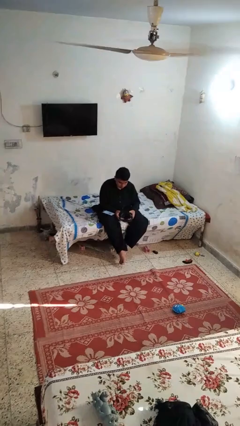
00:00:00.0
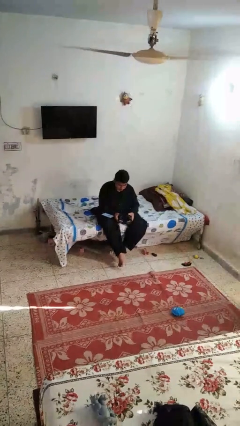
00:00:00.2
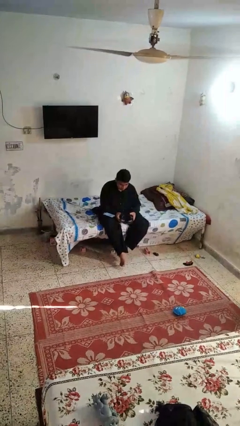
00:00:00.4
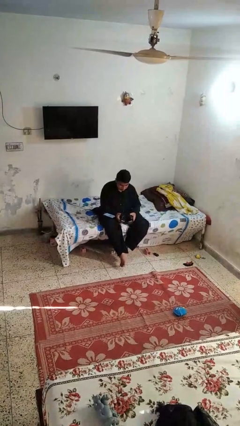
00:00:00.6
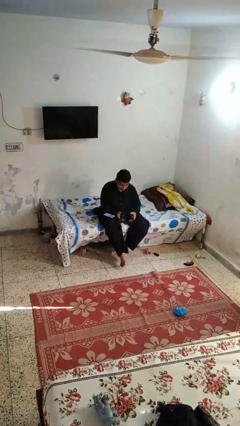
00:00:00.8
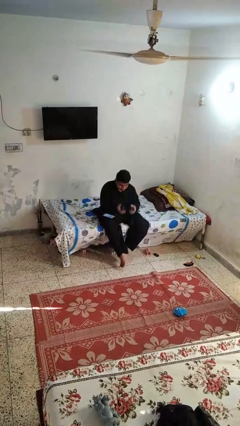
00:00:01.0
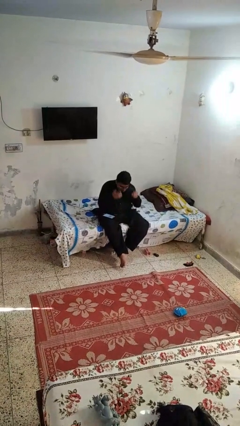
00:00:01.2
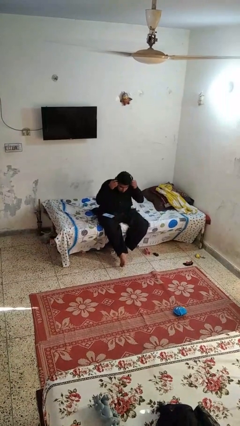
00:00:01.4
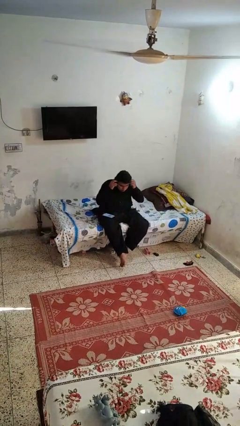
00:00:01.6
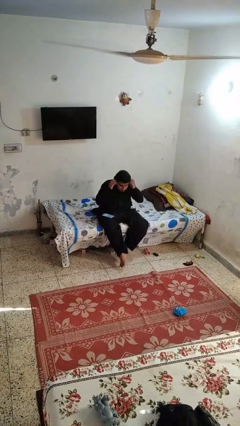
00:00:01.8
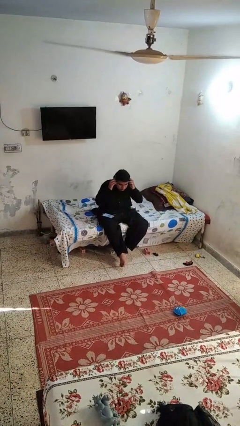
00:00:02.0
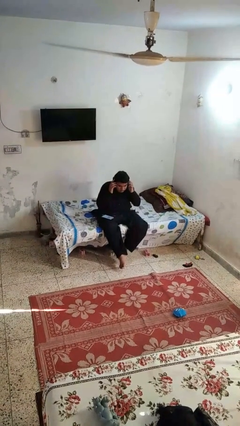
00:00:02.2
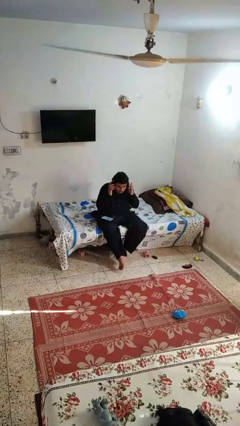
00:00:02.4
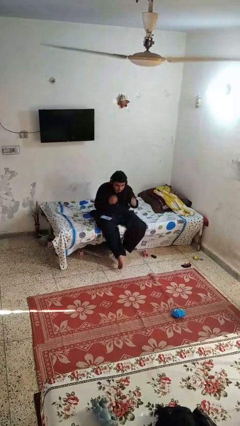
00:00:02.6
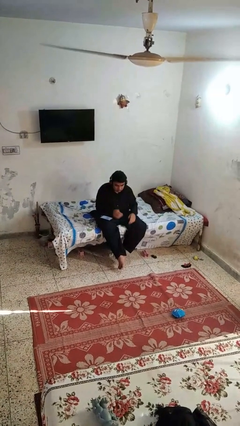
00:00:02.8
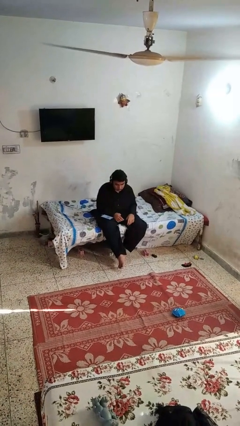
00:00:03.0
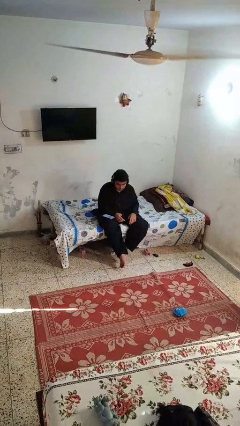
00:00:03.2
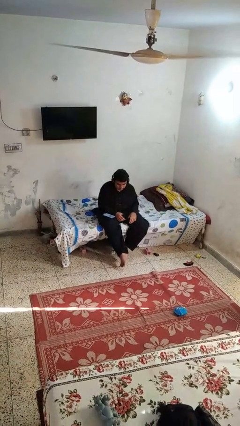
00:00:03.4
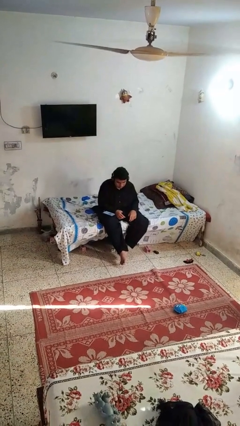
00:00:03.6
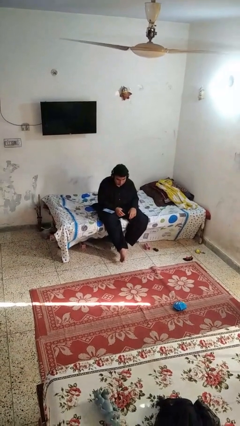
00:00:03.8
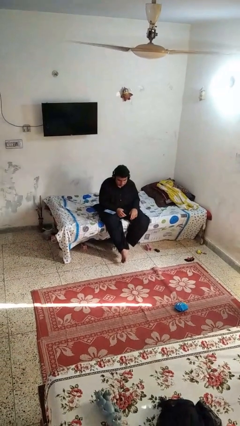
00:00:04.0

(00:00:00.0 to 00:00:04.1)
person puts on headphones

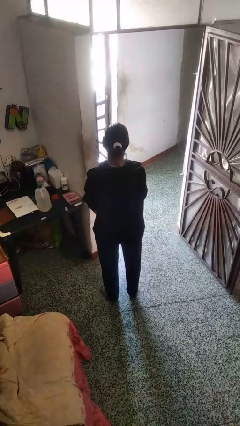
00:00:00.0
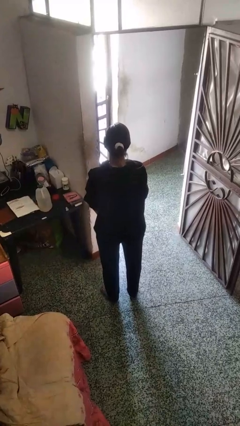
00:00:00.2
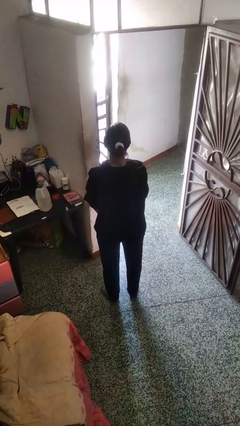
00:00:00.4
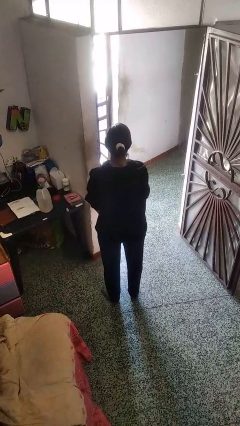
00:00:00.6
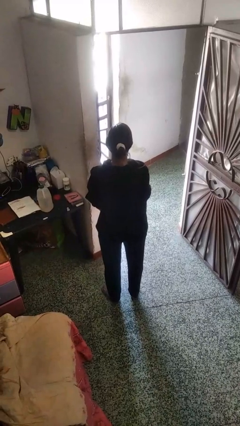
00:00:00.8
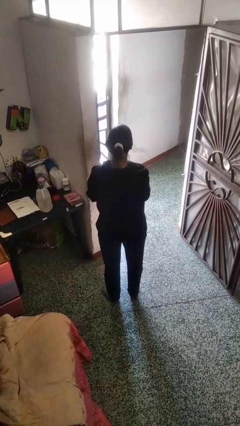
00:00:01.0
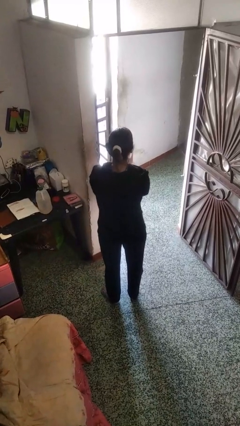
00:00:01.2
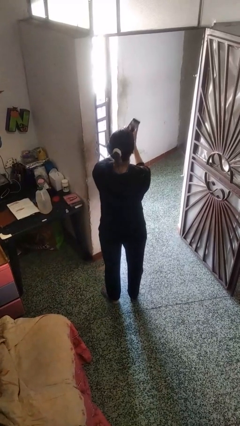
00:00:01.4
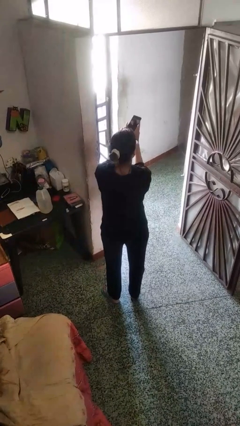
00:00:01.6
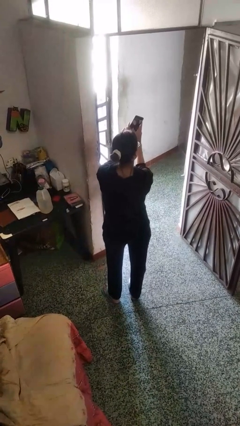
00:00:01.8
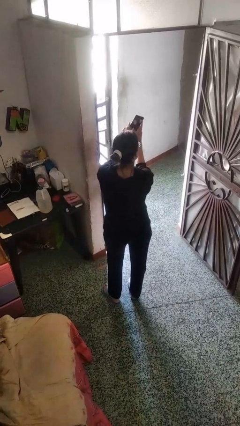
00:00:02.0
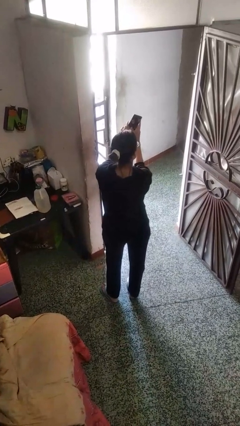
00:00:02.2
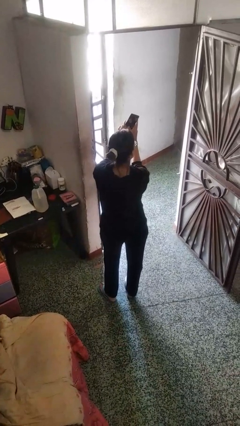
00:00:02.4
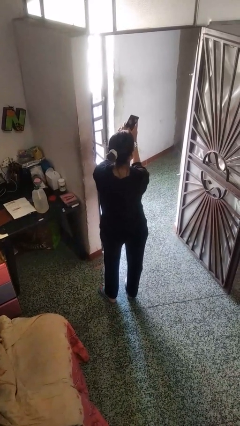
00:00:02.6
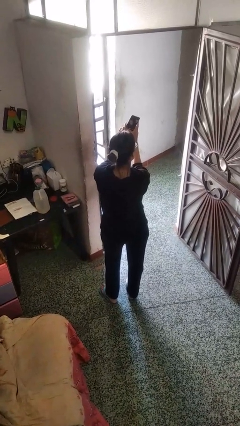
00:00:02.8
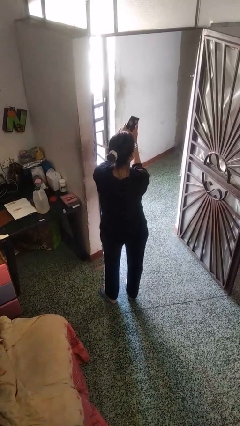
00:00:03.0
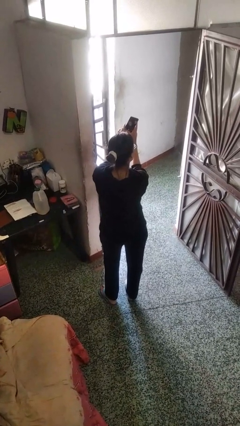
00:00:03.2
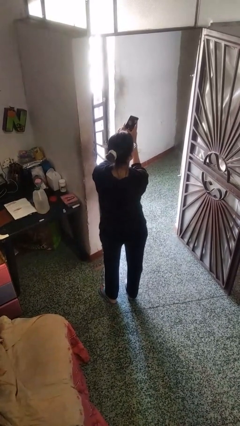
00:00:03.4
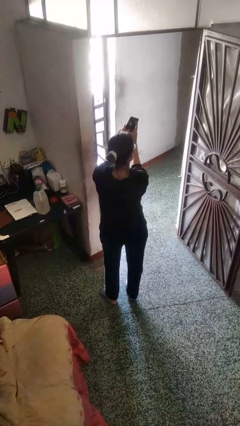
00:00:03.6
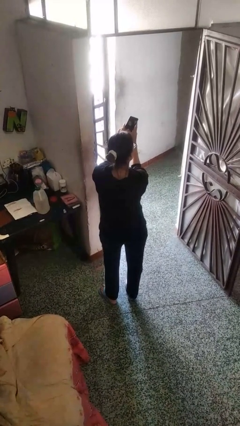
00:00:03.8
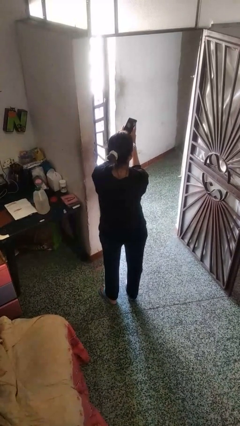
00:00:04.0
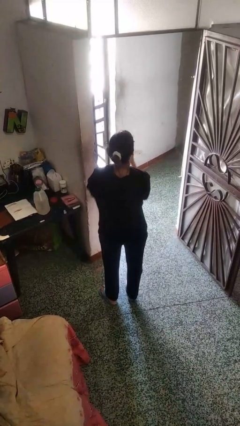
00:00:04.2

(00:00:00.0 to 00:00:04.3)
person takes selfie

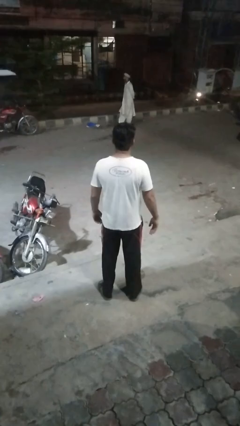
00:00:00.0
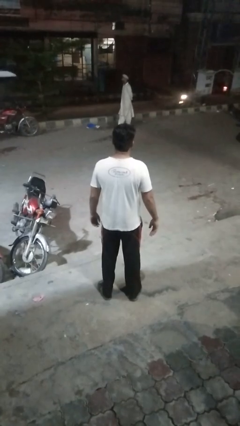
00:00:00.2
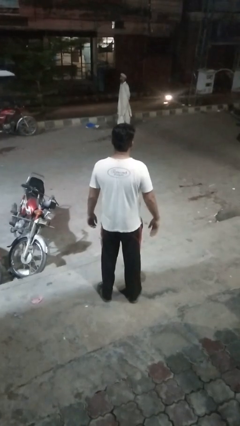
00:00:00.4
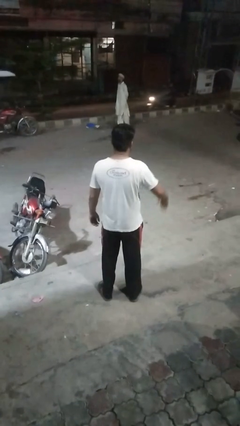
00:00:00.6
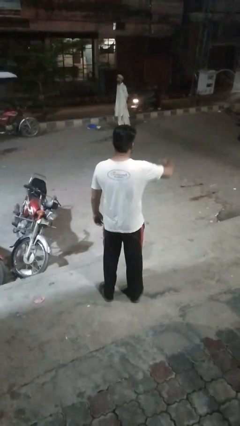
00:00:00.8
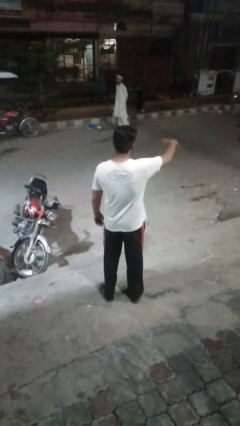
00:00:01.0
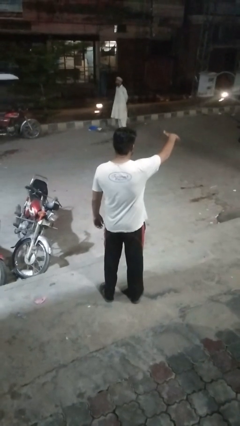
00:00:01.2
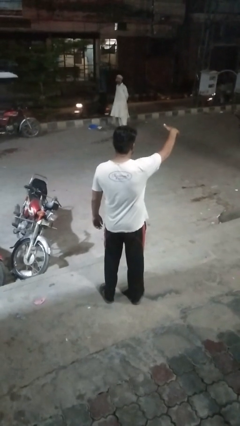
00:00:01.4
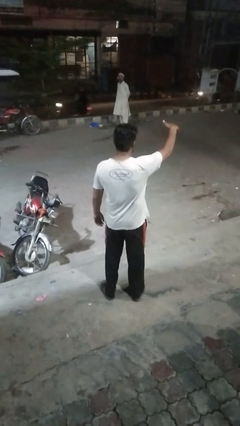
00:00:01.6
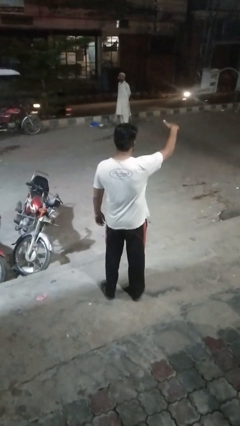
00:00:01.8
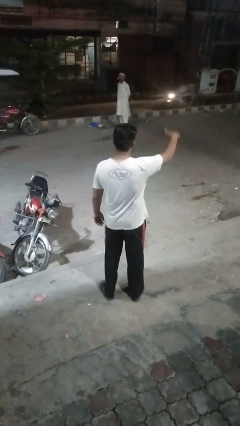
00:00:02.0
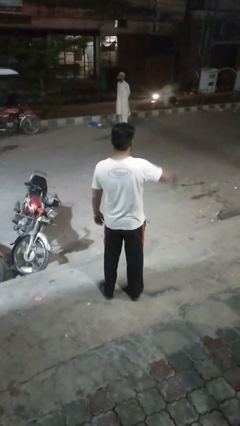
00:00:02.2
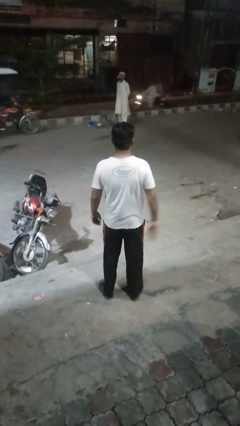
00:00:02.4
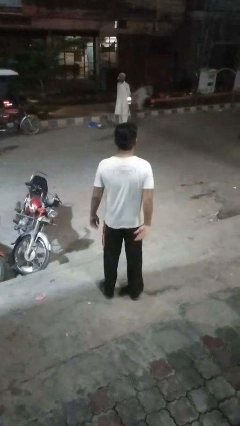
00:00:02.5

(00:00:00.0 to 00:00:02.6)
person gestures hang loose

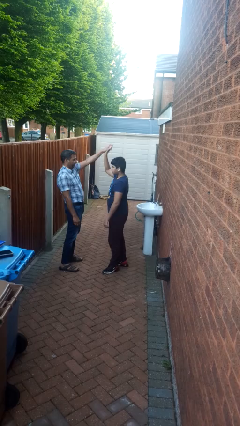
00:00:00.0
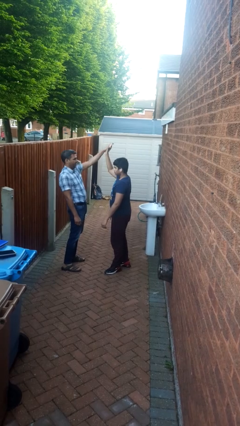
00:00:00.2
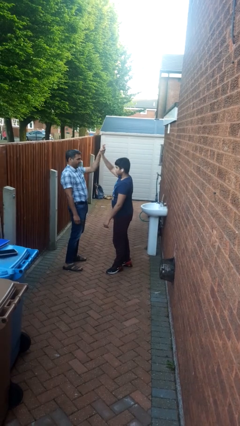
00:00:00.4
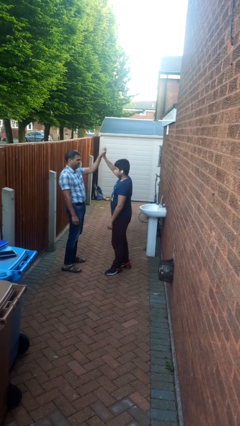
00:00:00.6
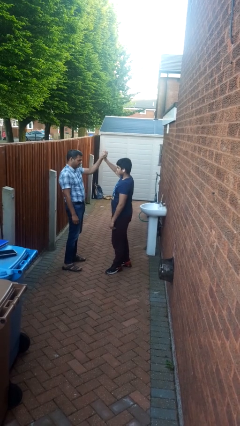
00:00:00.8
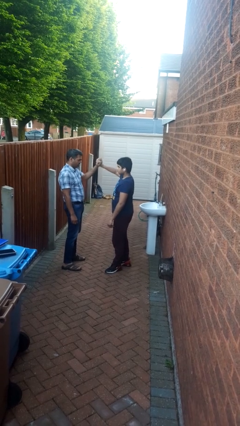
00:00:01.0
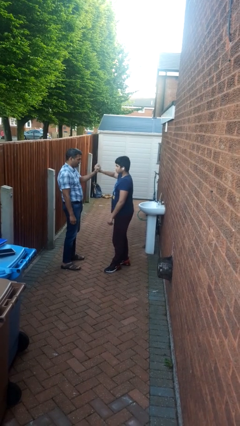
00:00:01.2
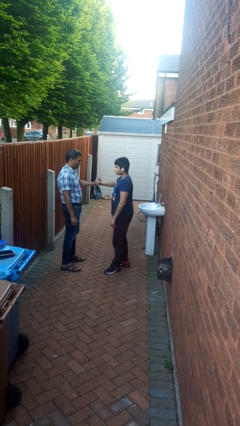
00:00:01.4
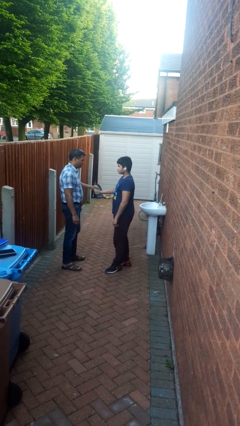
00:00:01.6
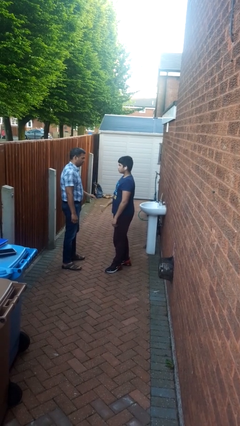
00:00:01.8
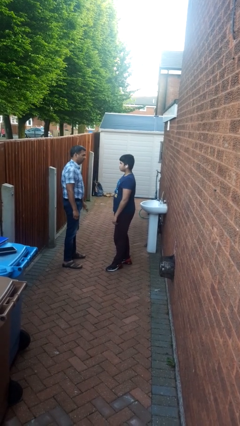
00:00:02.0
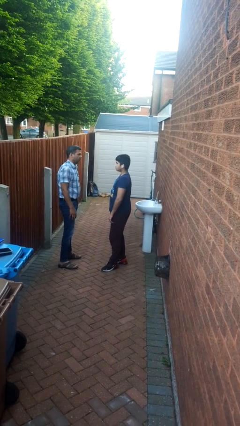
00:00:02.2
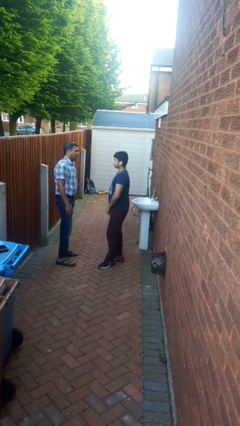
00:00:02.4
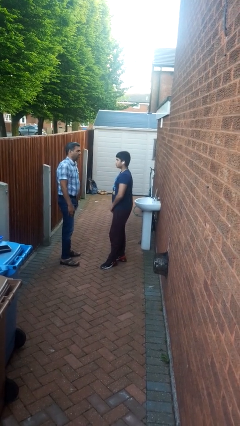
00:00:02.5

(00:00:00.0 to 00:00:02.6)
person highfives hand

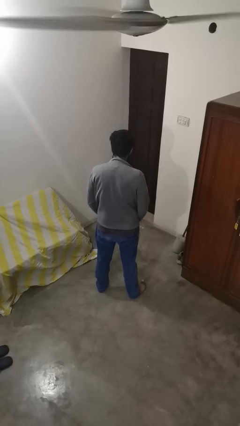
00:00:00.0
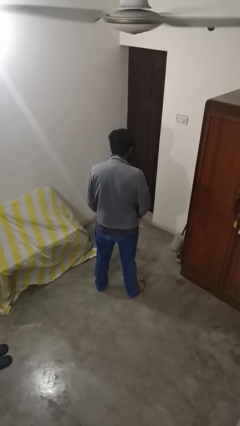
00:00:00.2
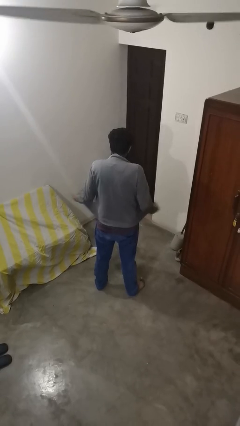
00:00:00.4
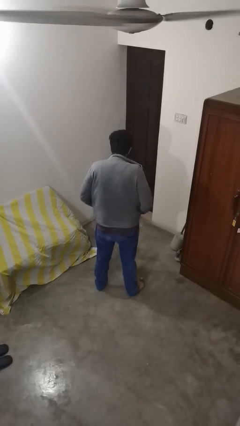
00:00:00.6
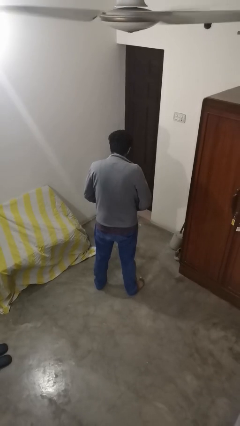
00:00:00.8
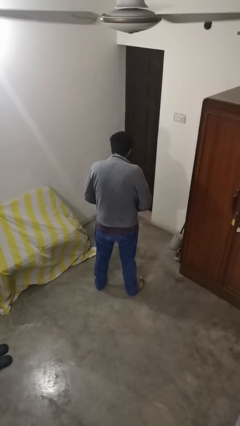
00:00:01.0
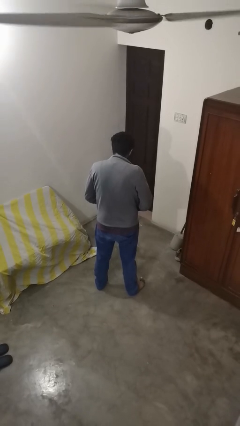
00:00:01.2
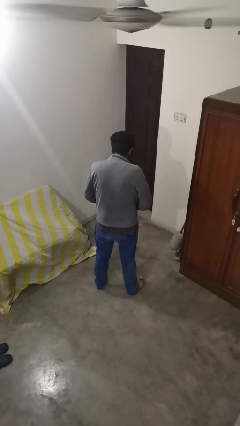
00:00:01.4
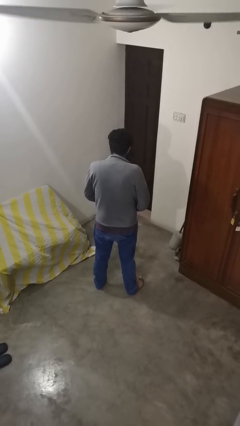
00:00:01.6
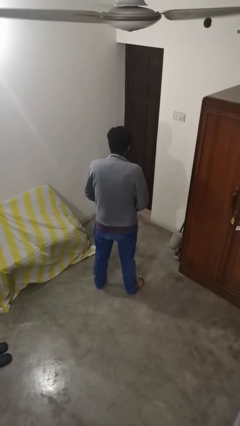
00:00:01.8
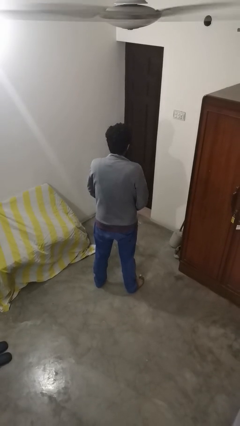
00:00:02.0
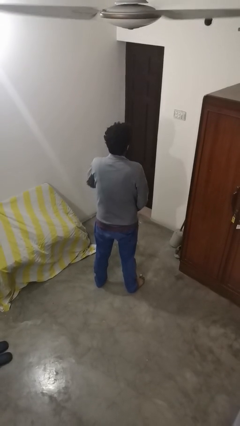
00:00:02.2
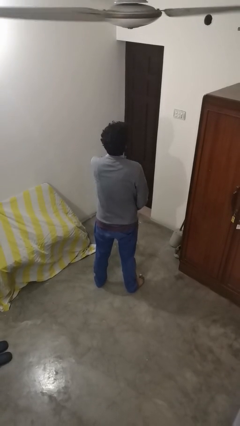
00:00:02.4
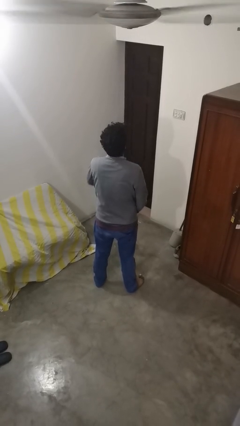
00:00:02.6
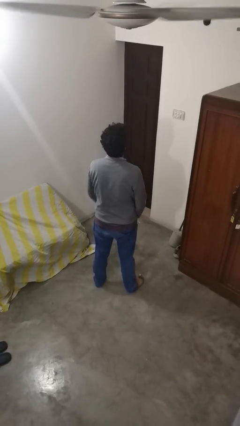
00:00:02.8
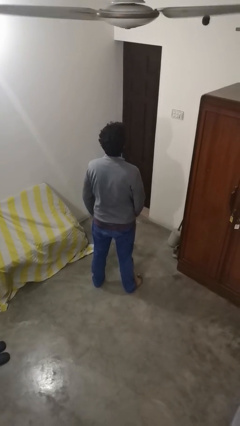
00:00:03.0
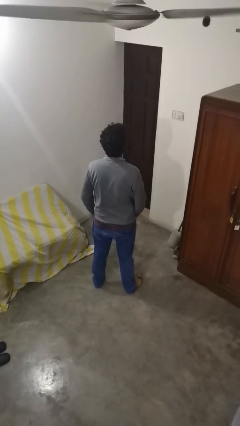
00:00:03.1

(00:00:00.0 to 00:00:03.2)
person zips up jacket

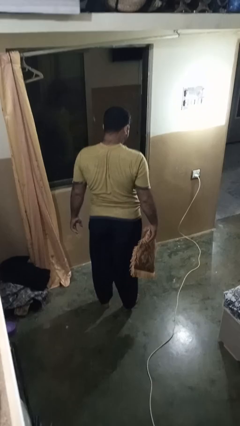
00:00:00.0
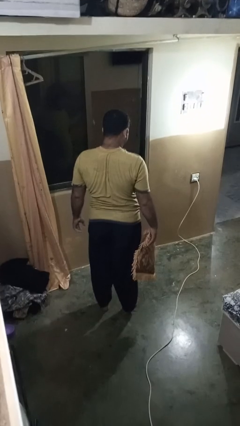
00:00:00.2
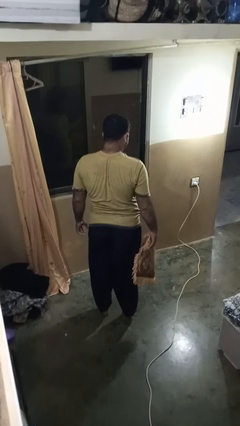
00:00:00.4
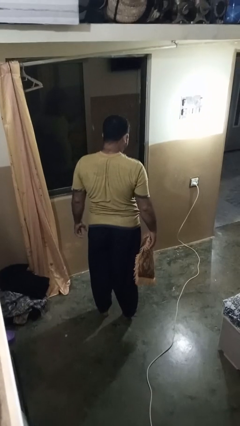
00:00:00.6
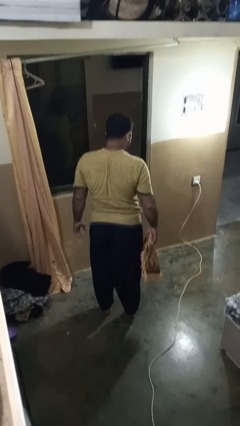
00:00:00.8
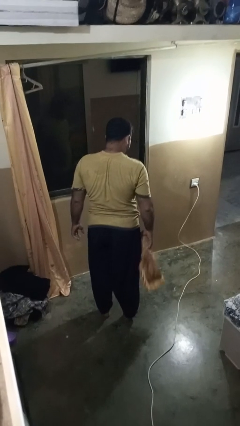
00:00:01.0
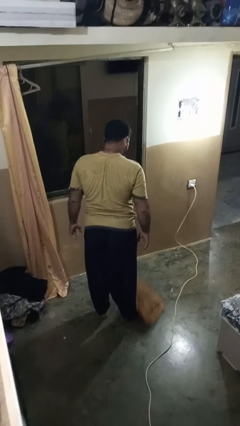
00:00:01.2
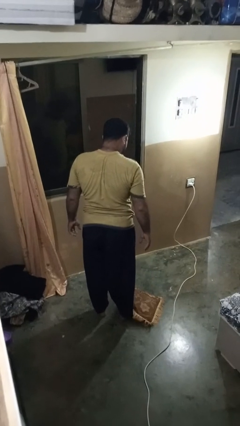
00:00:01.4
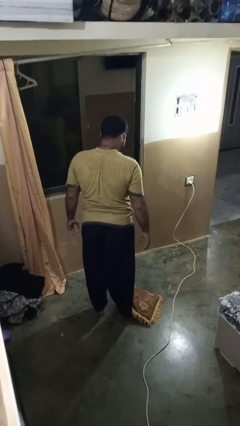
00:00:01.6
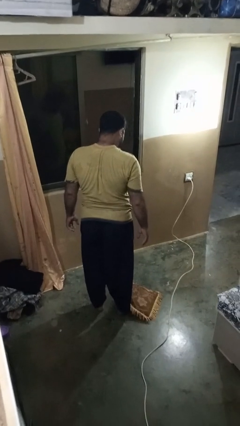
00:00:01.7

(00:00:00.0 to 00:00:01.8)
person drops object
